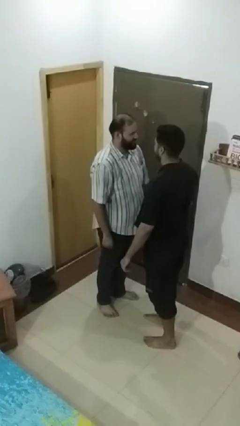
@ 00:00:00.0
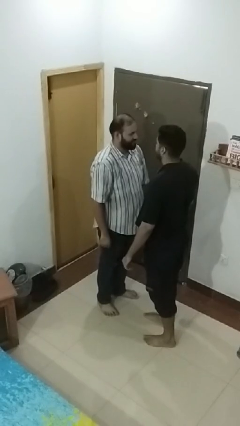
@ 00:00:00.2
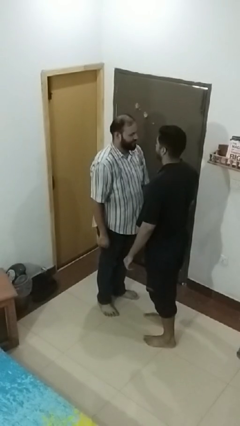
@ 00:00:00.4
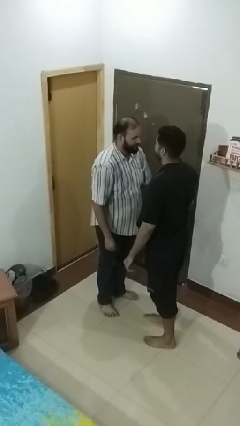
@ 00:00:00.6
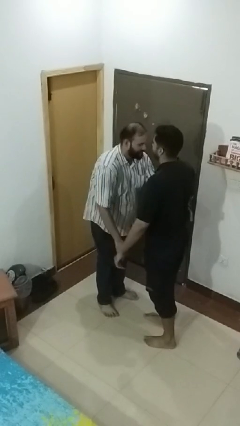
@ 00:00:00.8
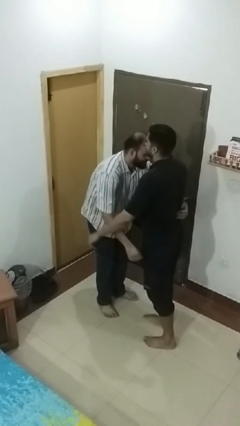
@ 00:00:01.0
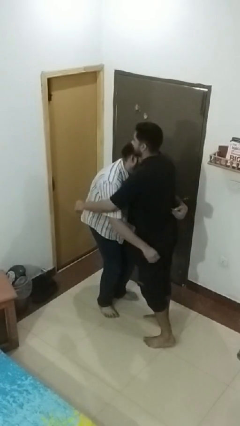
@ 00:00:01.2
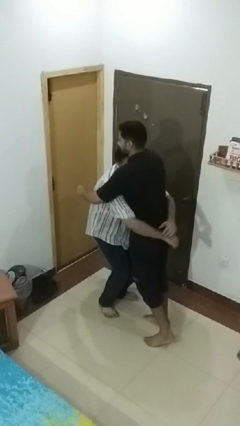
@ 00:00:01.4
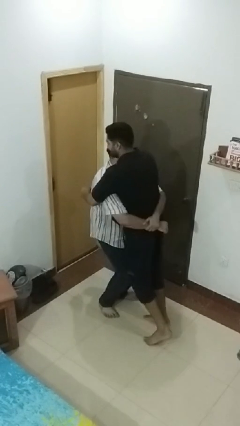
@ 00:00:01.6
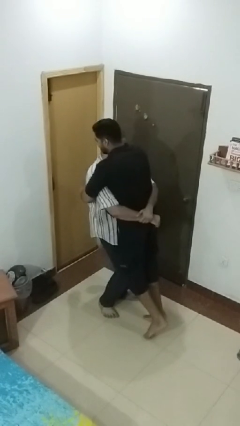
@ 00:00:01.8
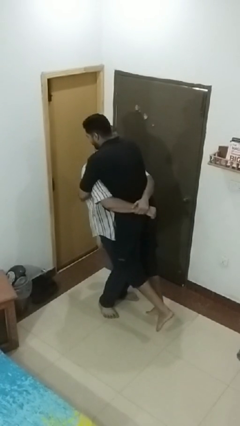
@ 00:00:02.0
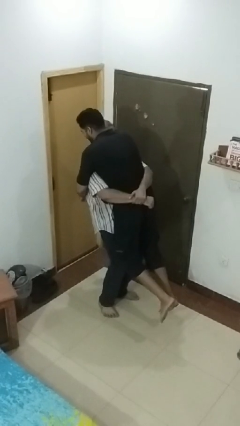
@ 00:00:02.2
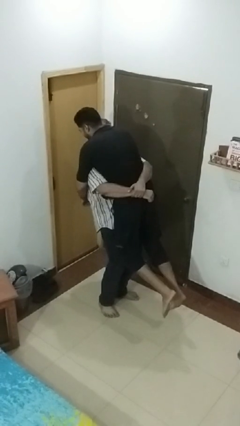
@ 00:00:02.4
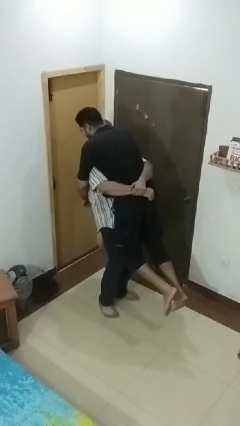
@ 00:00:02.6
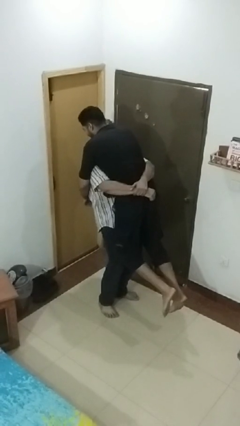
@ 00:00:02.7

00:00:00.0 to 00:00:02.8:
person picks up person

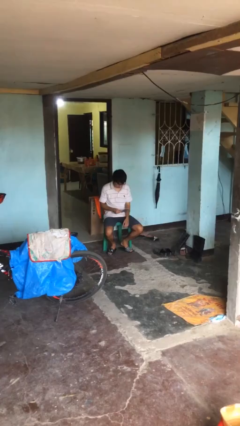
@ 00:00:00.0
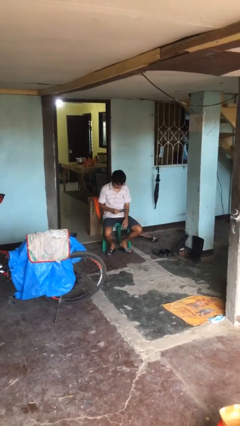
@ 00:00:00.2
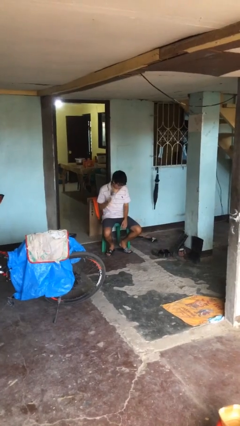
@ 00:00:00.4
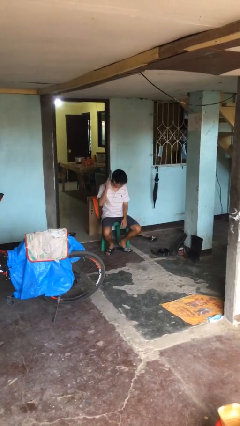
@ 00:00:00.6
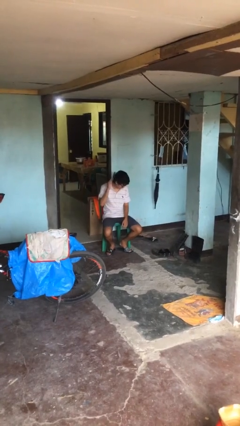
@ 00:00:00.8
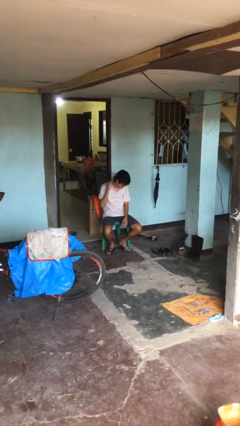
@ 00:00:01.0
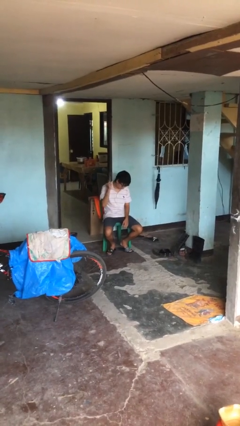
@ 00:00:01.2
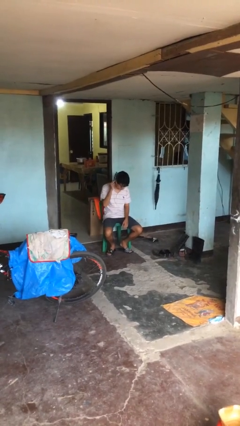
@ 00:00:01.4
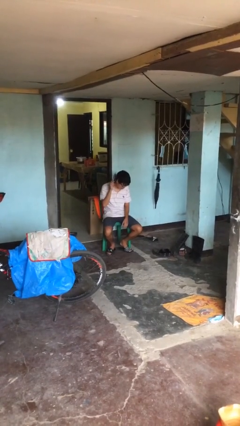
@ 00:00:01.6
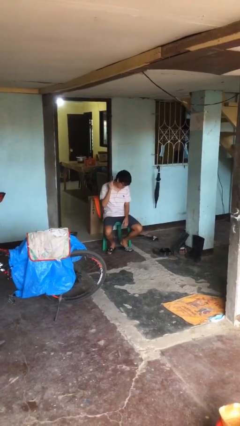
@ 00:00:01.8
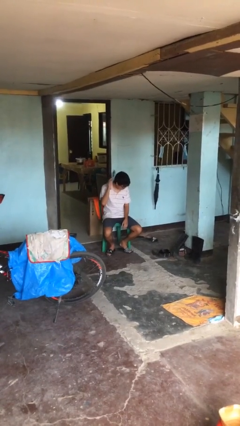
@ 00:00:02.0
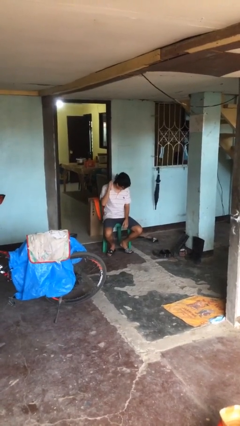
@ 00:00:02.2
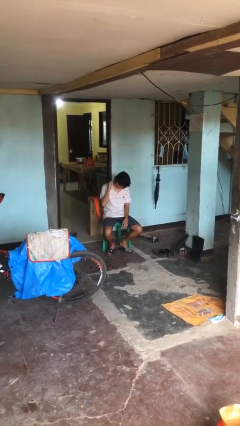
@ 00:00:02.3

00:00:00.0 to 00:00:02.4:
person brushes hair

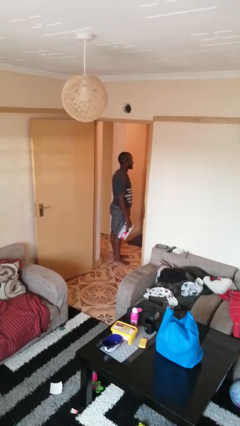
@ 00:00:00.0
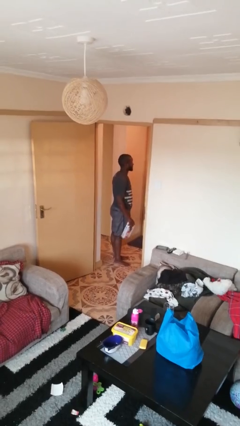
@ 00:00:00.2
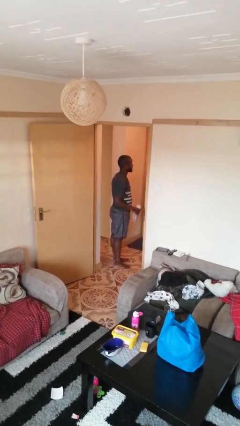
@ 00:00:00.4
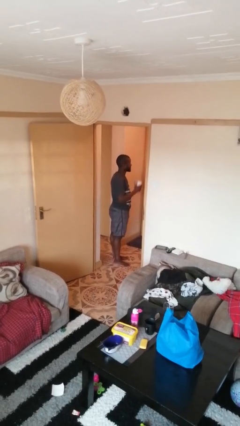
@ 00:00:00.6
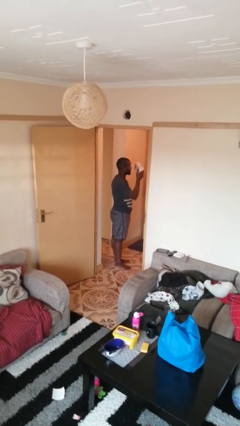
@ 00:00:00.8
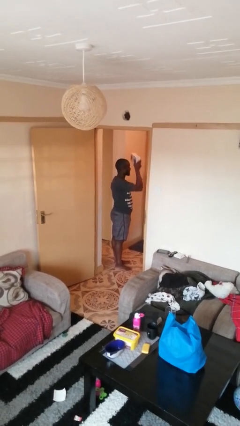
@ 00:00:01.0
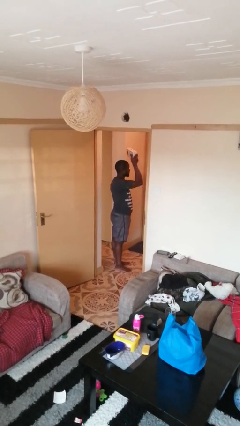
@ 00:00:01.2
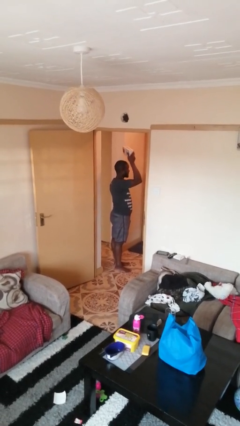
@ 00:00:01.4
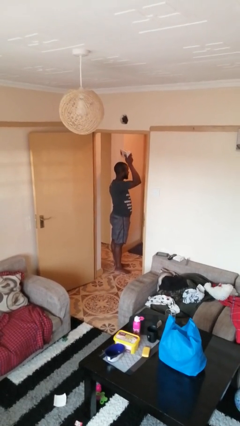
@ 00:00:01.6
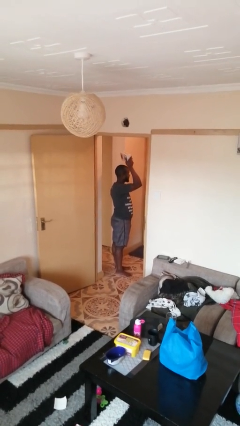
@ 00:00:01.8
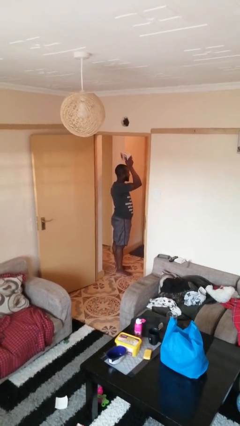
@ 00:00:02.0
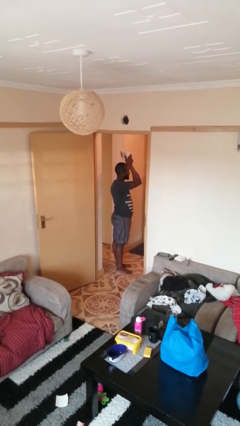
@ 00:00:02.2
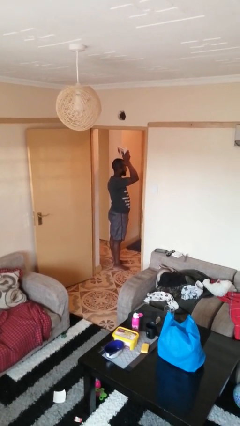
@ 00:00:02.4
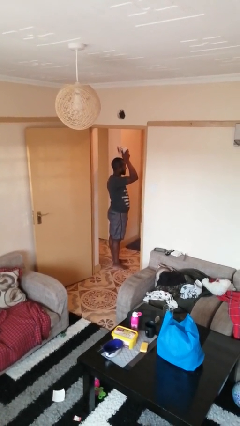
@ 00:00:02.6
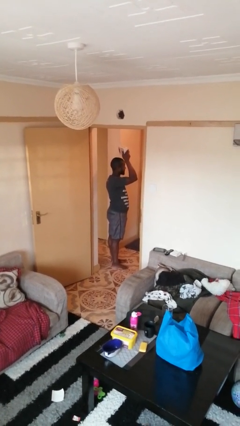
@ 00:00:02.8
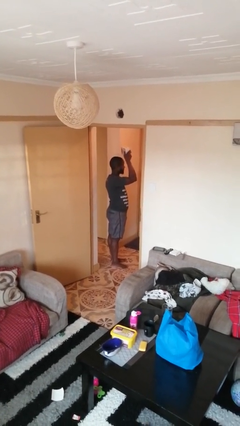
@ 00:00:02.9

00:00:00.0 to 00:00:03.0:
person holds object above head

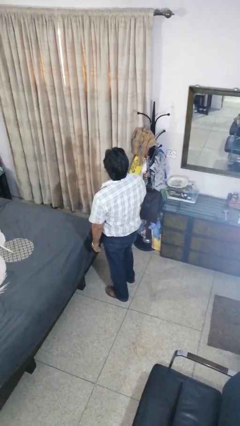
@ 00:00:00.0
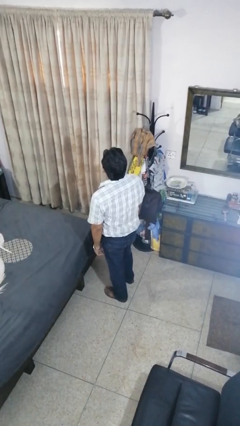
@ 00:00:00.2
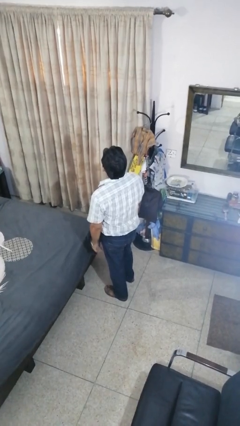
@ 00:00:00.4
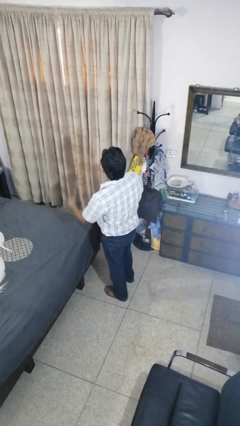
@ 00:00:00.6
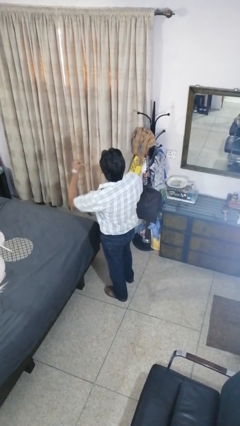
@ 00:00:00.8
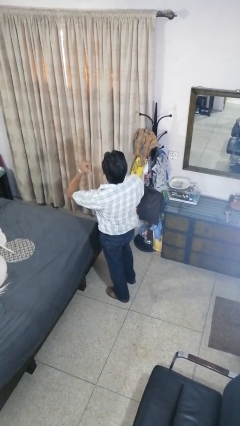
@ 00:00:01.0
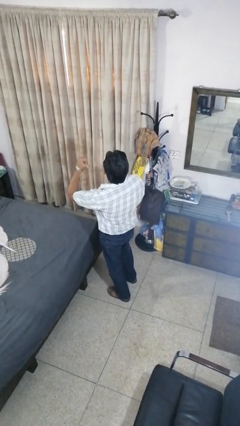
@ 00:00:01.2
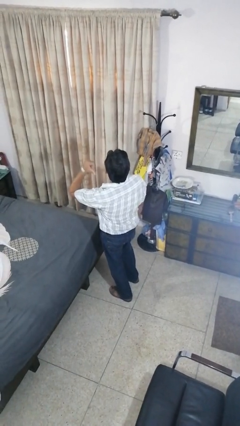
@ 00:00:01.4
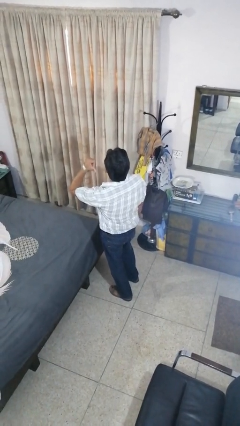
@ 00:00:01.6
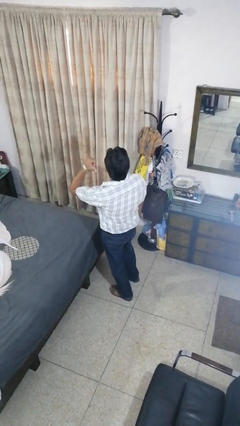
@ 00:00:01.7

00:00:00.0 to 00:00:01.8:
person gestures behind me

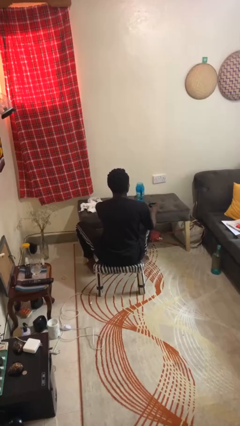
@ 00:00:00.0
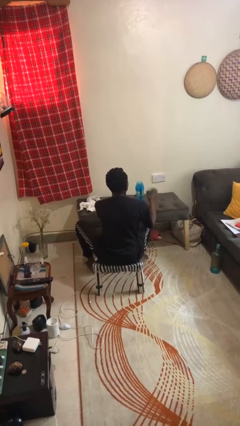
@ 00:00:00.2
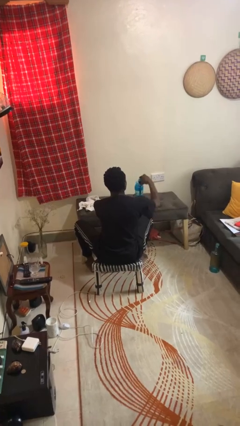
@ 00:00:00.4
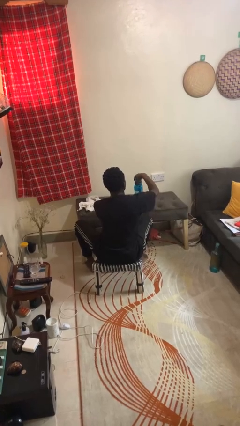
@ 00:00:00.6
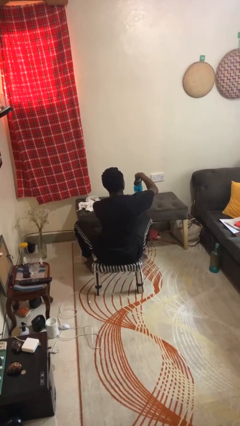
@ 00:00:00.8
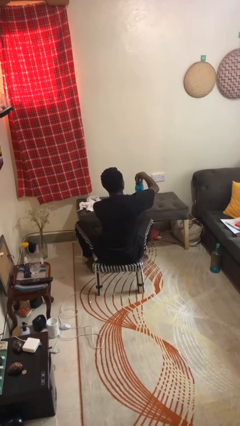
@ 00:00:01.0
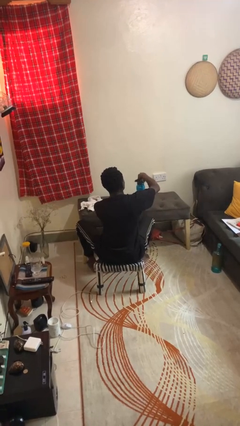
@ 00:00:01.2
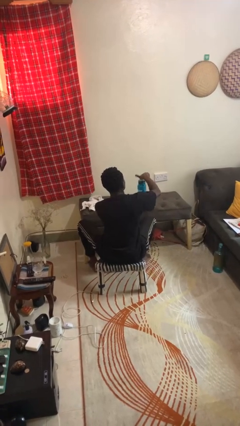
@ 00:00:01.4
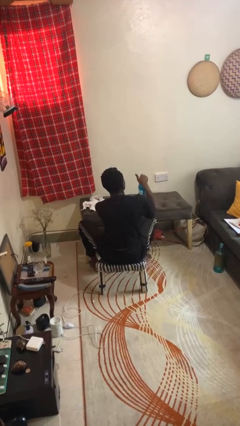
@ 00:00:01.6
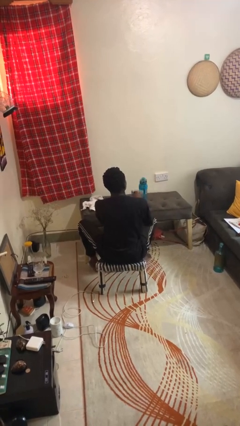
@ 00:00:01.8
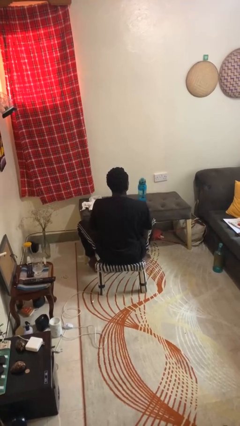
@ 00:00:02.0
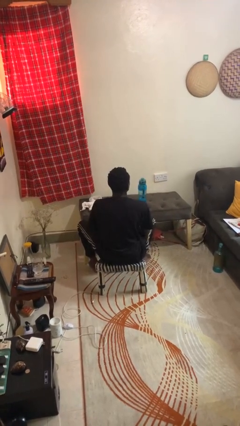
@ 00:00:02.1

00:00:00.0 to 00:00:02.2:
person closes jar

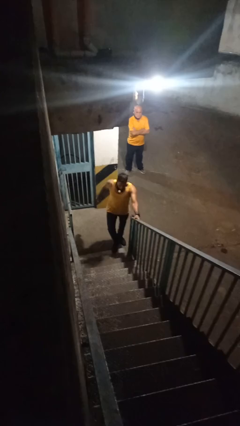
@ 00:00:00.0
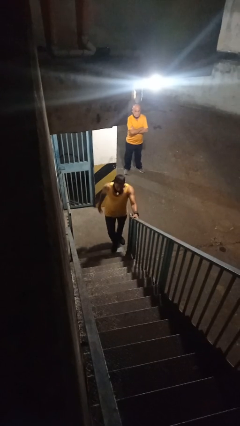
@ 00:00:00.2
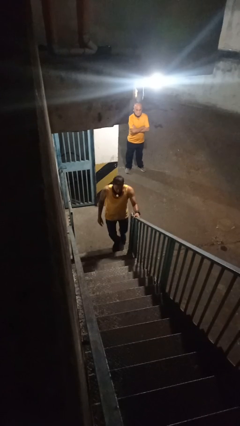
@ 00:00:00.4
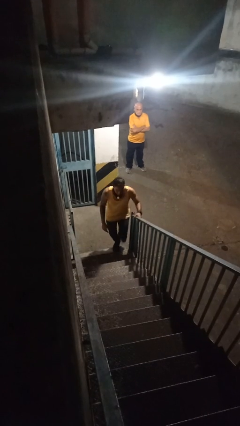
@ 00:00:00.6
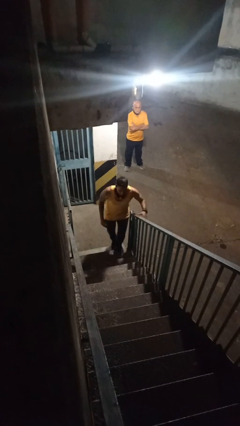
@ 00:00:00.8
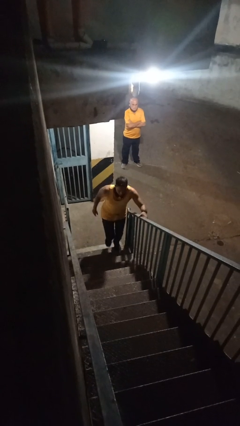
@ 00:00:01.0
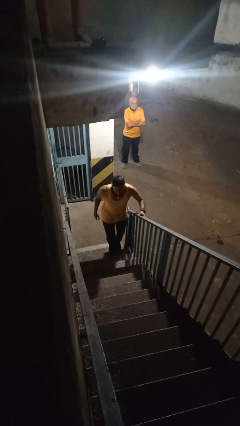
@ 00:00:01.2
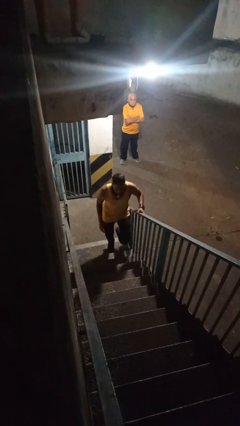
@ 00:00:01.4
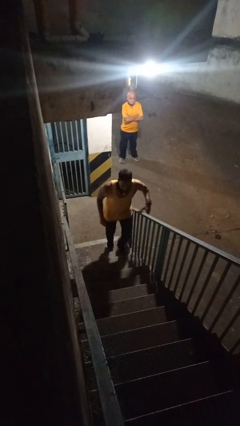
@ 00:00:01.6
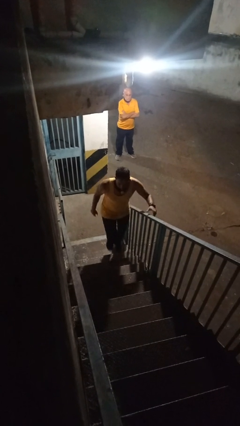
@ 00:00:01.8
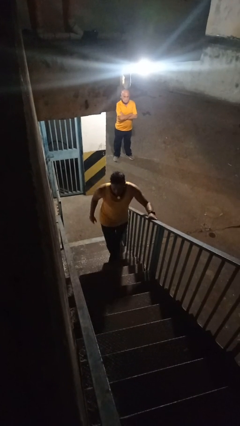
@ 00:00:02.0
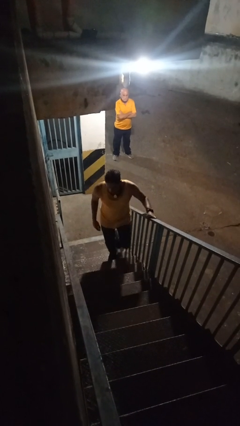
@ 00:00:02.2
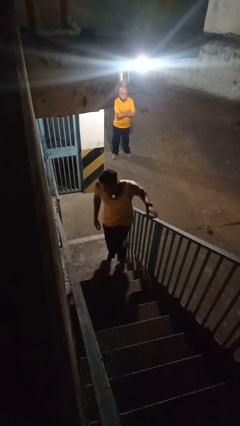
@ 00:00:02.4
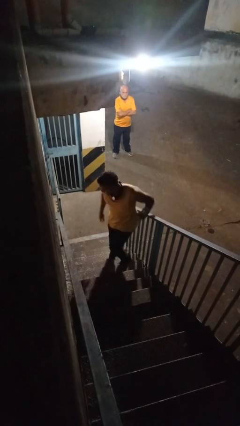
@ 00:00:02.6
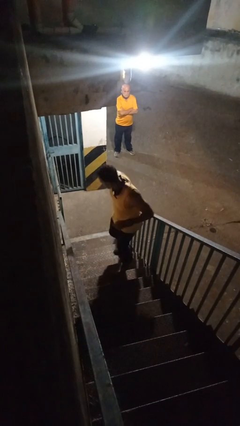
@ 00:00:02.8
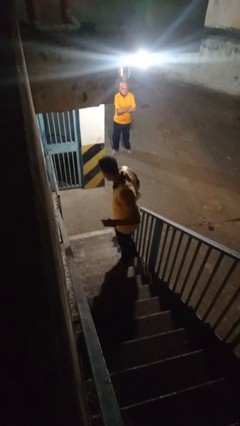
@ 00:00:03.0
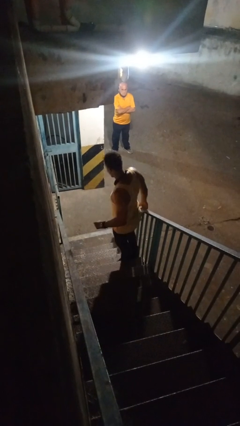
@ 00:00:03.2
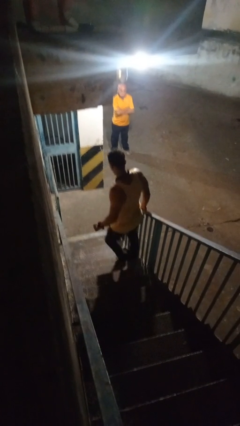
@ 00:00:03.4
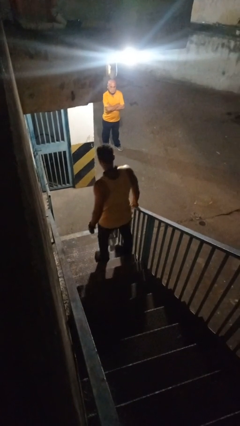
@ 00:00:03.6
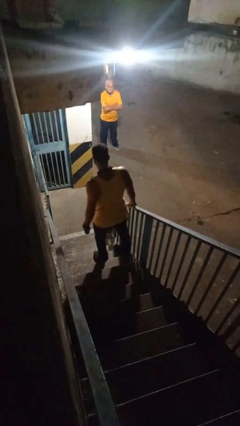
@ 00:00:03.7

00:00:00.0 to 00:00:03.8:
person climbs up stairs

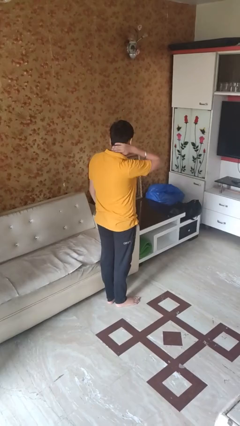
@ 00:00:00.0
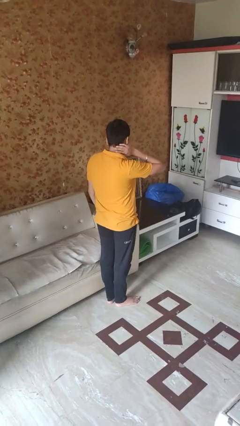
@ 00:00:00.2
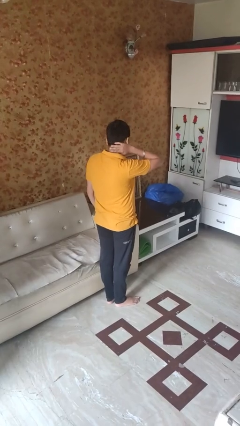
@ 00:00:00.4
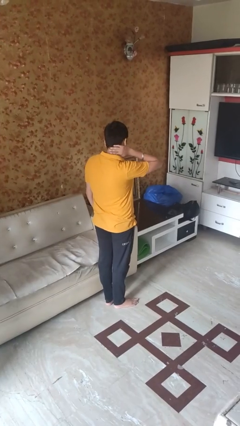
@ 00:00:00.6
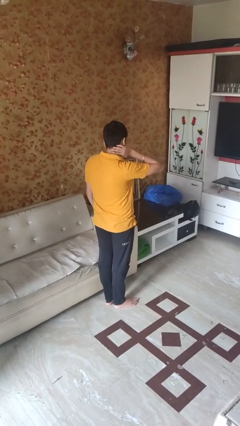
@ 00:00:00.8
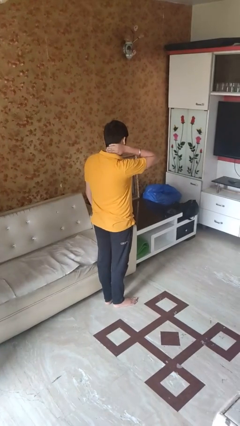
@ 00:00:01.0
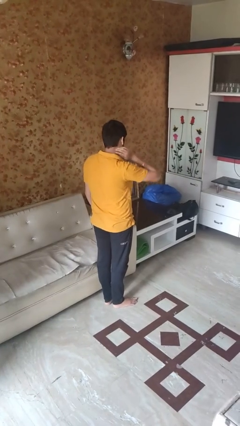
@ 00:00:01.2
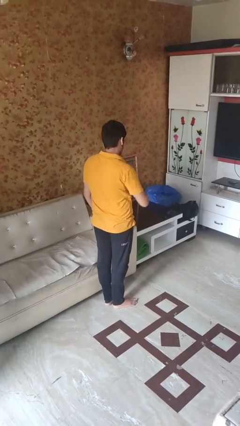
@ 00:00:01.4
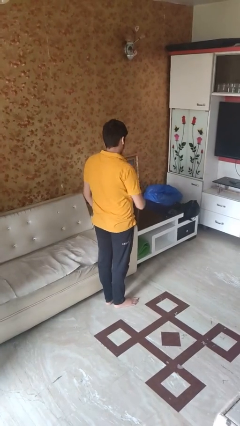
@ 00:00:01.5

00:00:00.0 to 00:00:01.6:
person rubs neck
